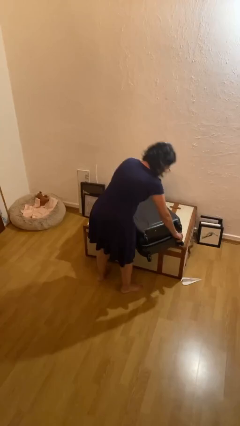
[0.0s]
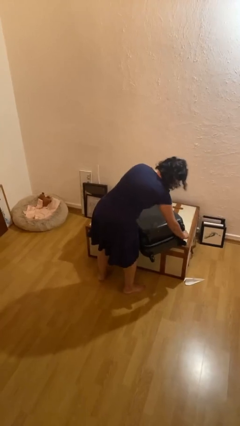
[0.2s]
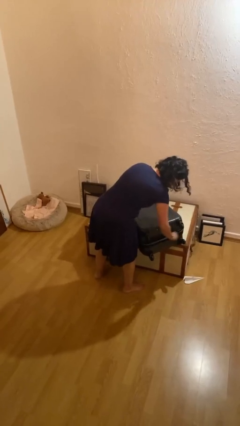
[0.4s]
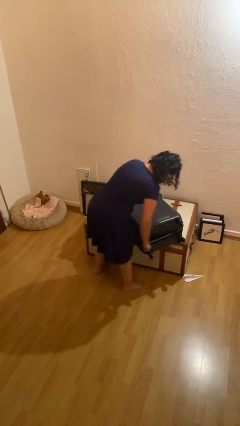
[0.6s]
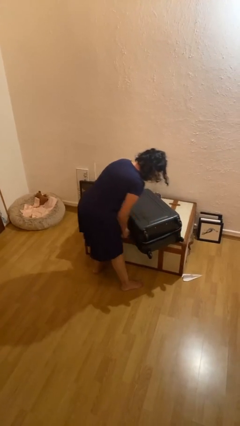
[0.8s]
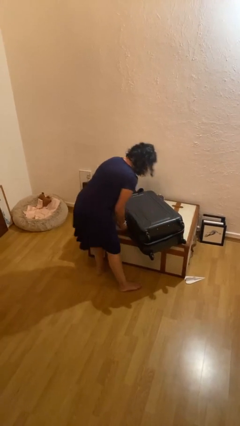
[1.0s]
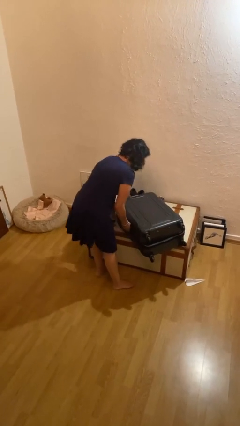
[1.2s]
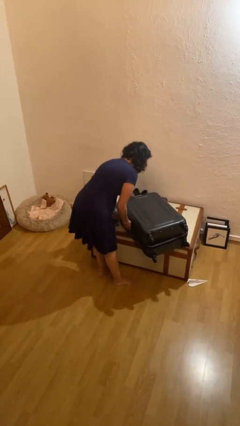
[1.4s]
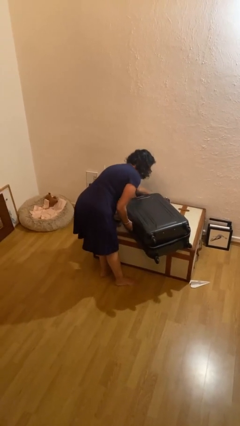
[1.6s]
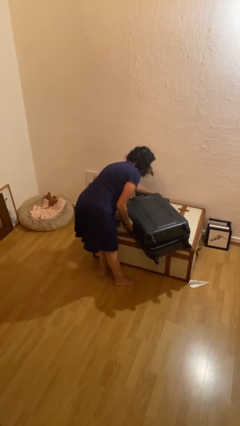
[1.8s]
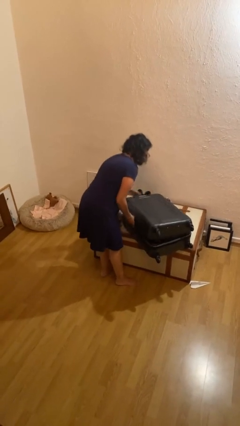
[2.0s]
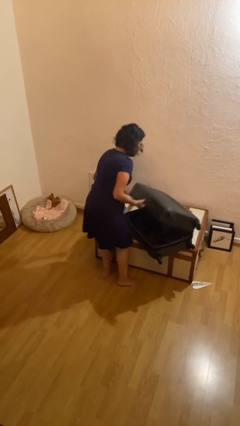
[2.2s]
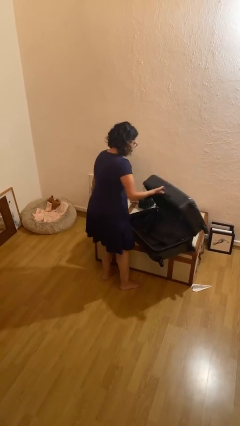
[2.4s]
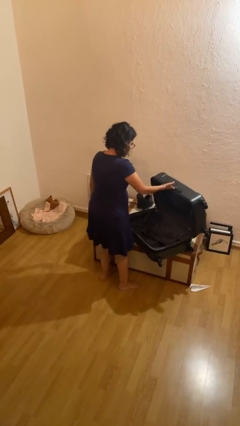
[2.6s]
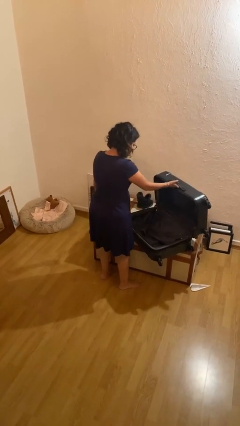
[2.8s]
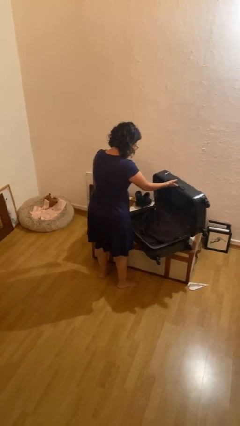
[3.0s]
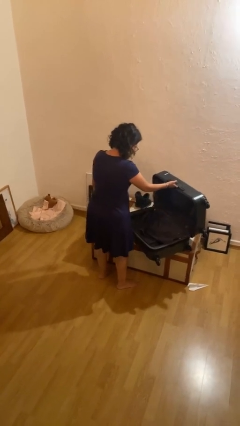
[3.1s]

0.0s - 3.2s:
person opens suitcase

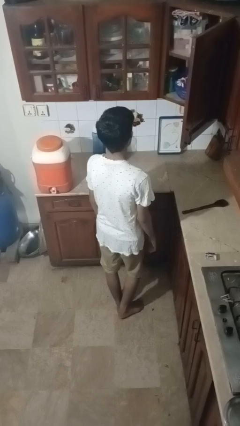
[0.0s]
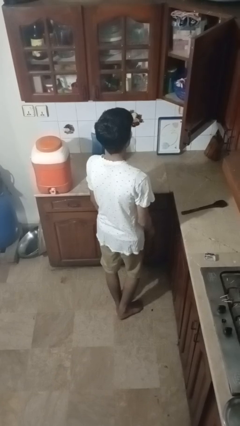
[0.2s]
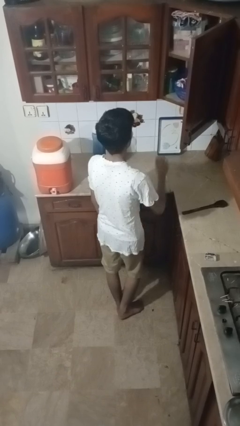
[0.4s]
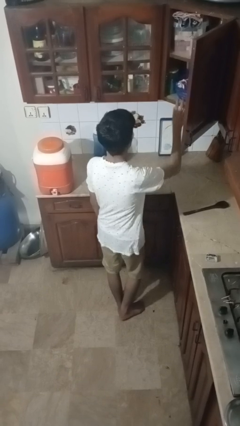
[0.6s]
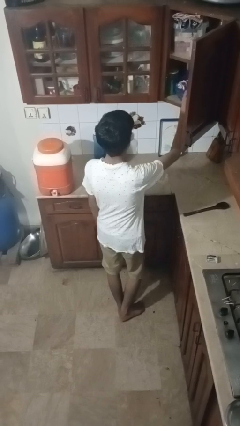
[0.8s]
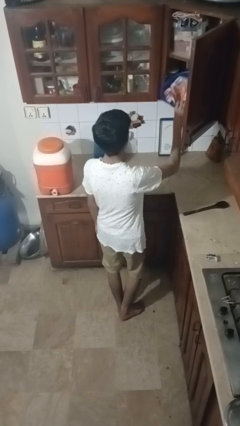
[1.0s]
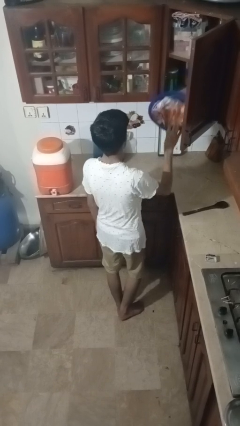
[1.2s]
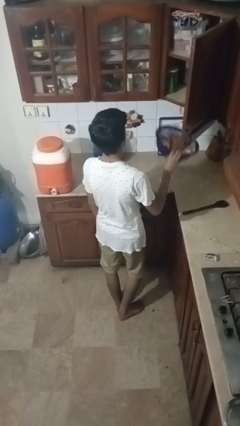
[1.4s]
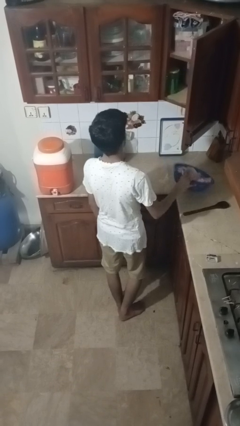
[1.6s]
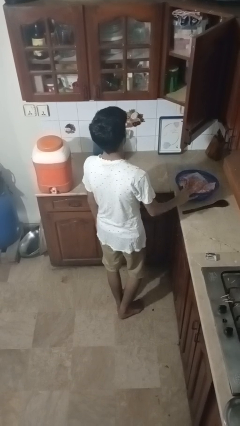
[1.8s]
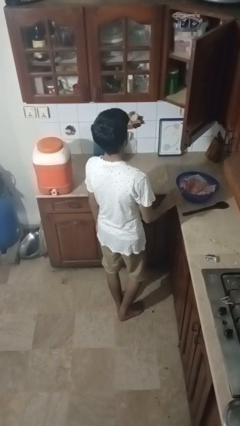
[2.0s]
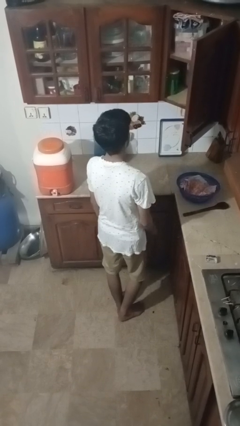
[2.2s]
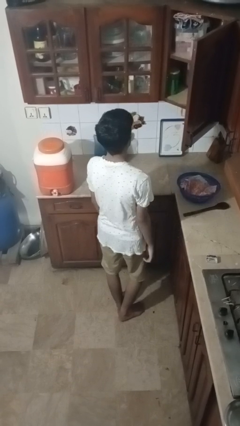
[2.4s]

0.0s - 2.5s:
person takes object from cabinet

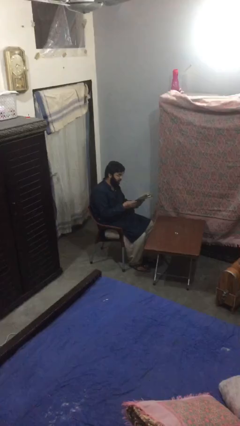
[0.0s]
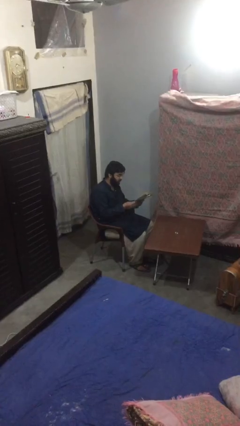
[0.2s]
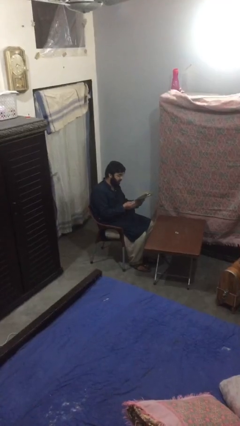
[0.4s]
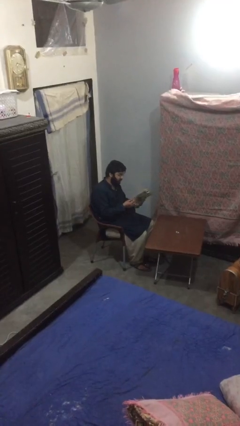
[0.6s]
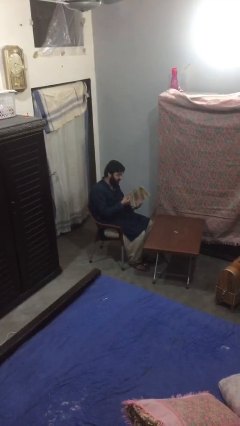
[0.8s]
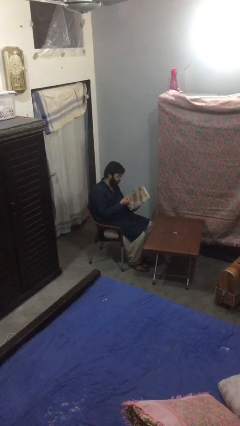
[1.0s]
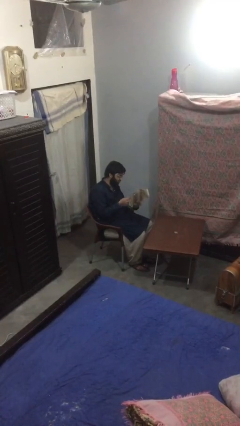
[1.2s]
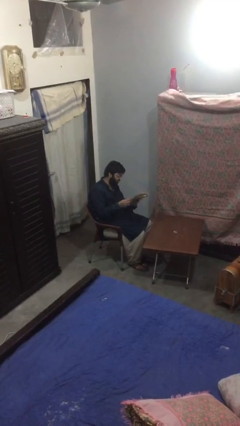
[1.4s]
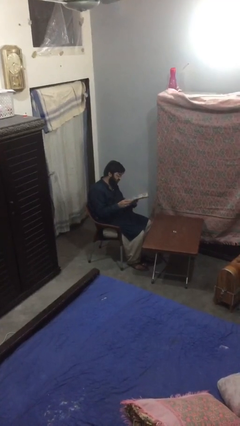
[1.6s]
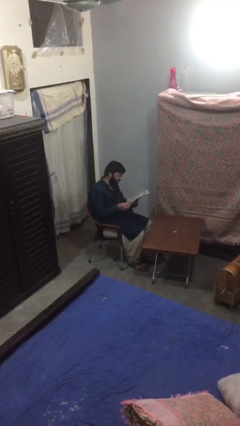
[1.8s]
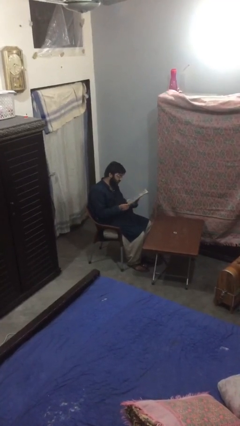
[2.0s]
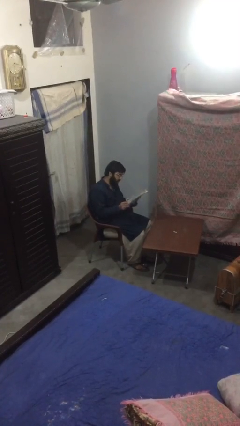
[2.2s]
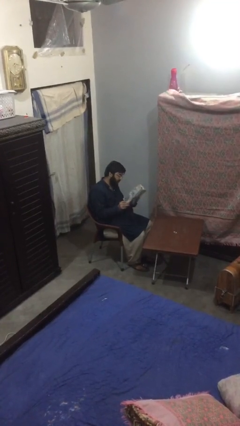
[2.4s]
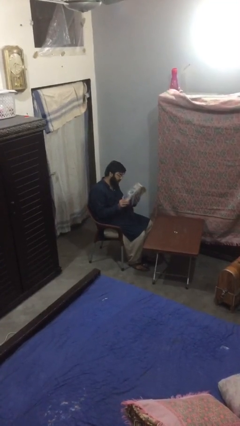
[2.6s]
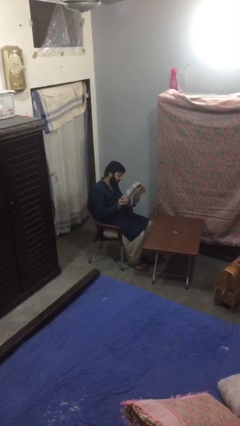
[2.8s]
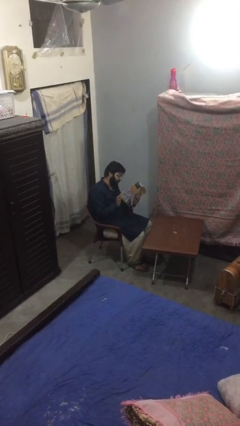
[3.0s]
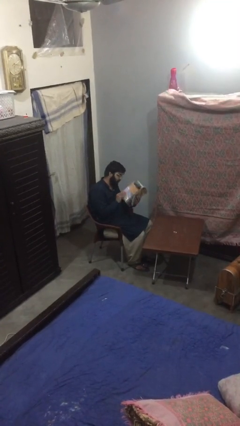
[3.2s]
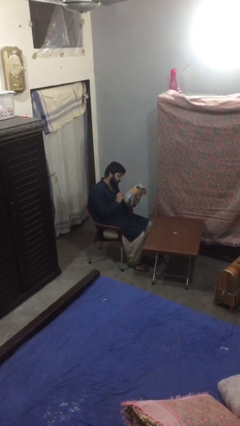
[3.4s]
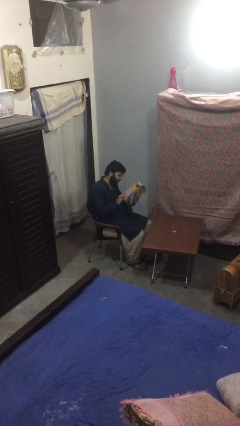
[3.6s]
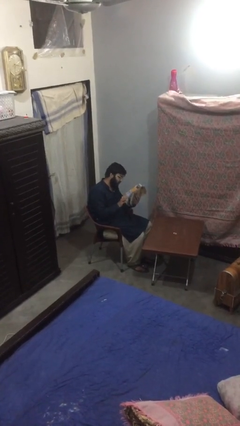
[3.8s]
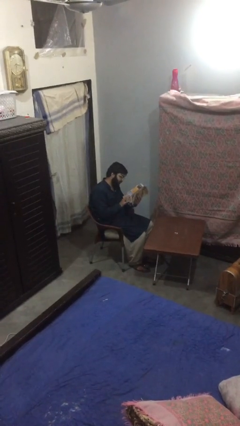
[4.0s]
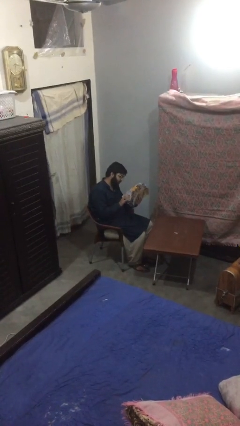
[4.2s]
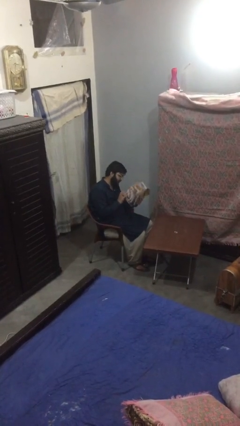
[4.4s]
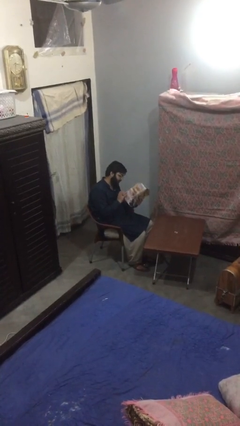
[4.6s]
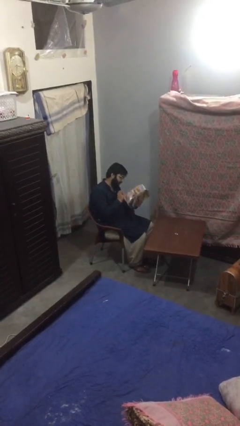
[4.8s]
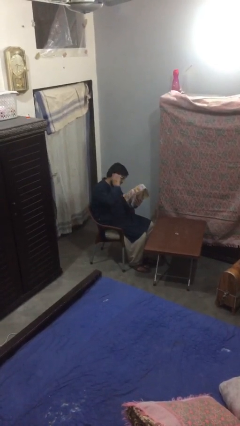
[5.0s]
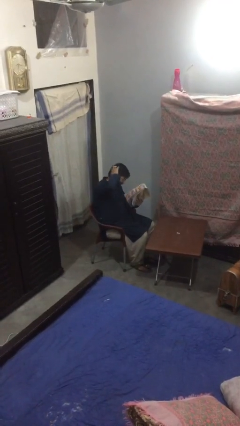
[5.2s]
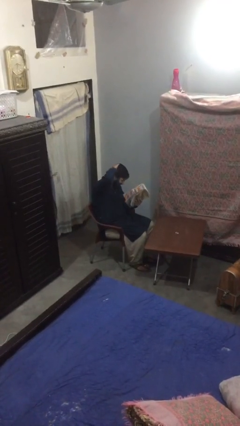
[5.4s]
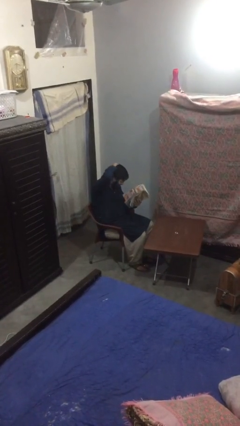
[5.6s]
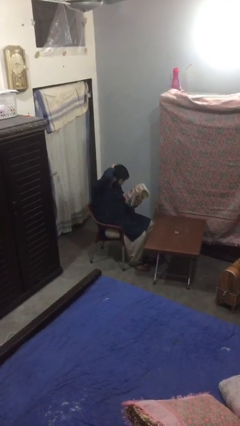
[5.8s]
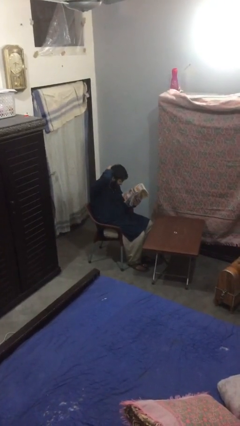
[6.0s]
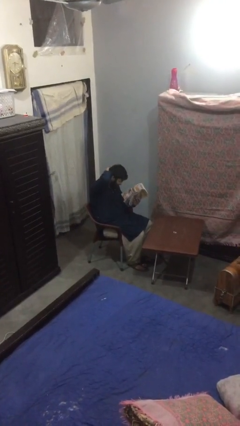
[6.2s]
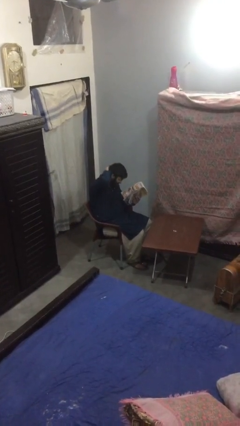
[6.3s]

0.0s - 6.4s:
person reads document

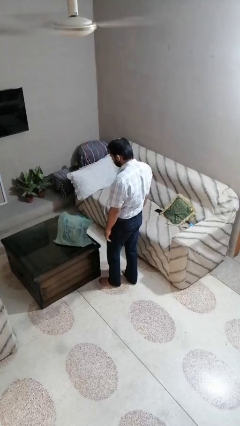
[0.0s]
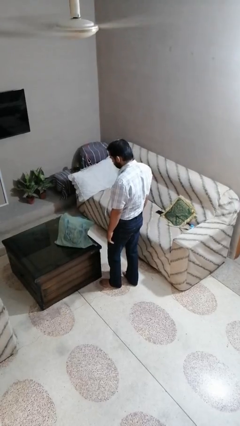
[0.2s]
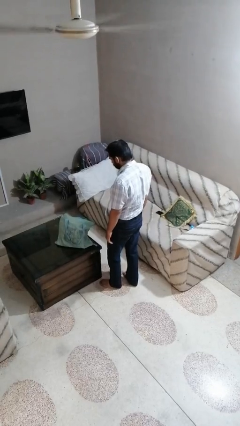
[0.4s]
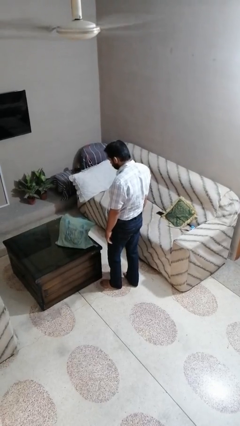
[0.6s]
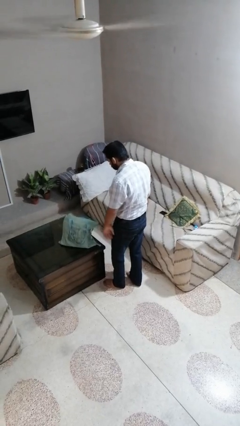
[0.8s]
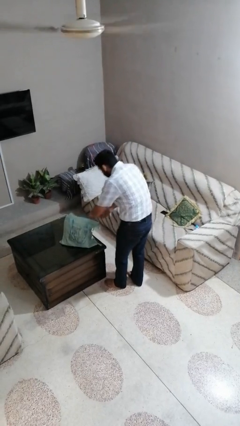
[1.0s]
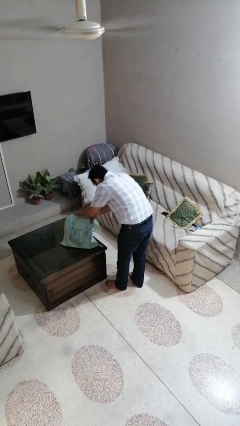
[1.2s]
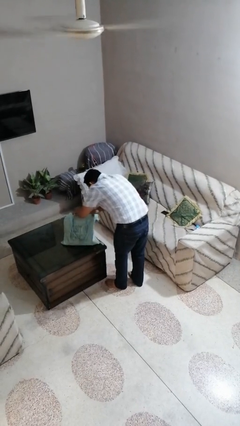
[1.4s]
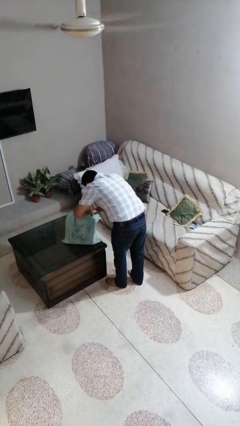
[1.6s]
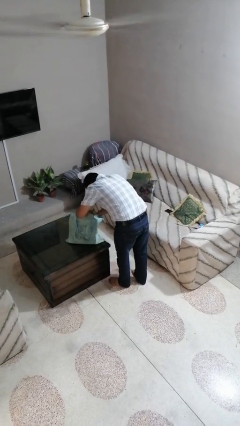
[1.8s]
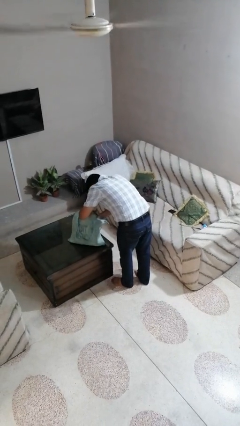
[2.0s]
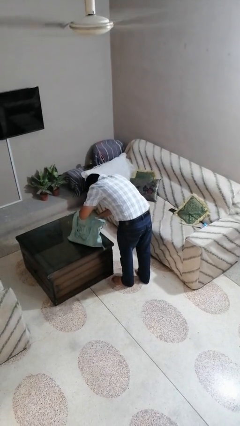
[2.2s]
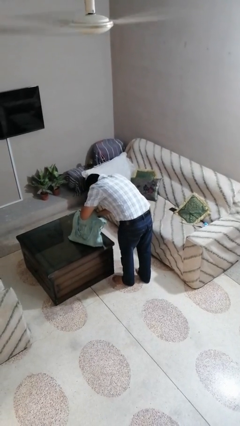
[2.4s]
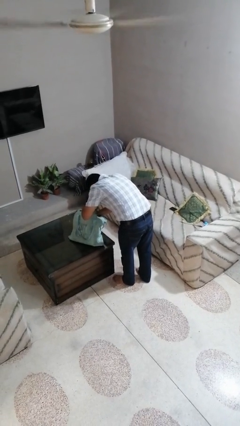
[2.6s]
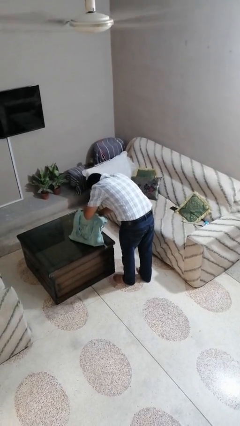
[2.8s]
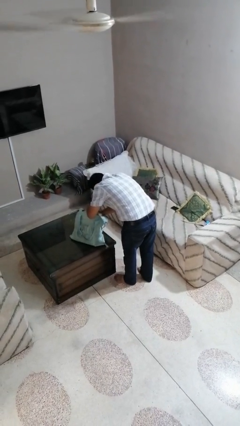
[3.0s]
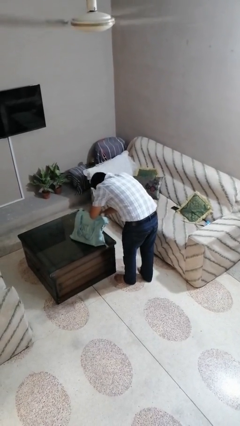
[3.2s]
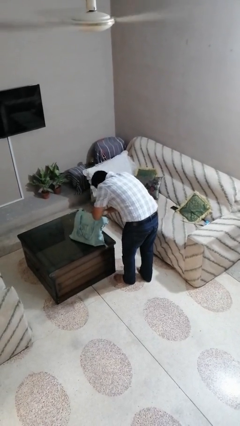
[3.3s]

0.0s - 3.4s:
person searches in bag

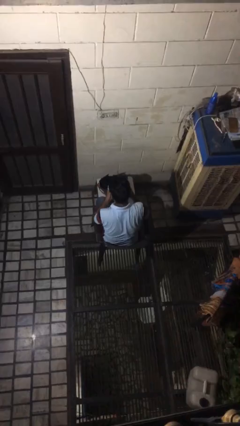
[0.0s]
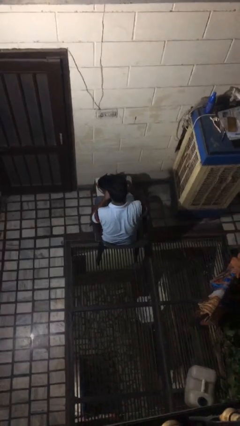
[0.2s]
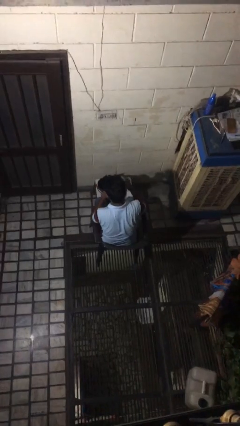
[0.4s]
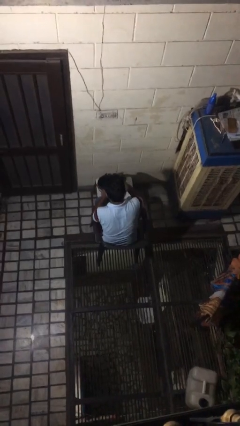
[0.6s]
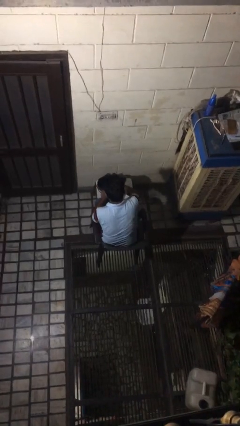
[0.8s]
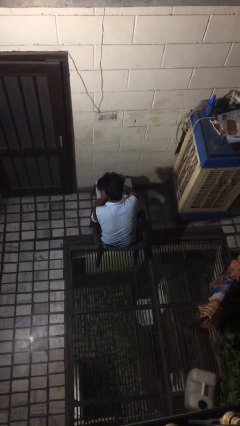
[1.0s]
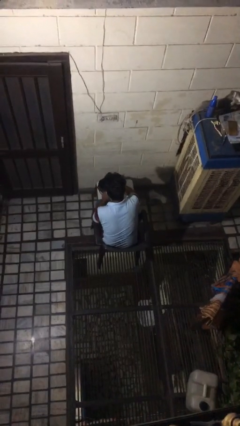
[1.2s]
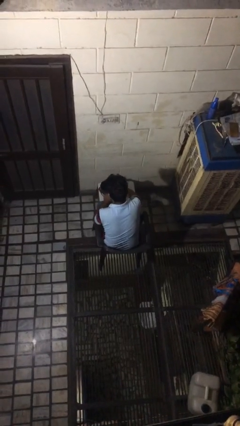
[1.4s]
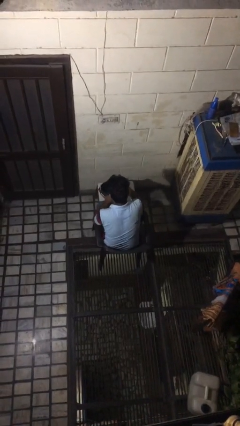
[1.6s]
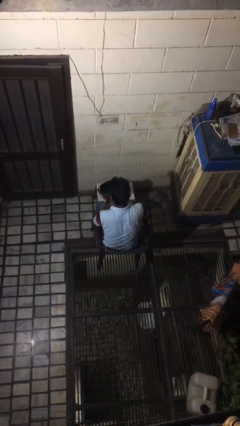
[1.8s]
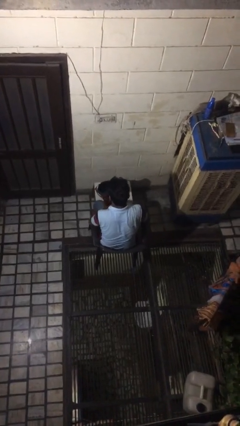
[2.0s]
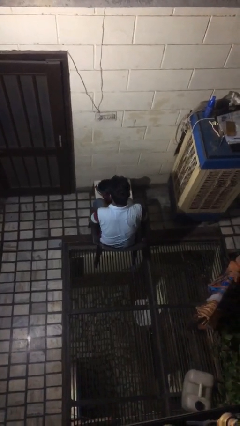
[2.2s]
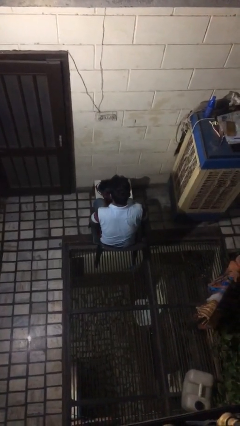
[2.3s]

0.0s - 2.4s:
person puts object into bag

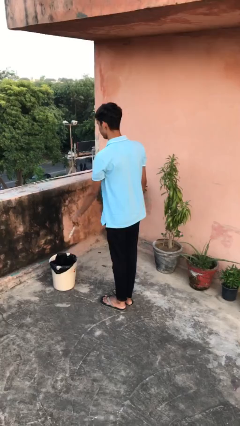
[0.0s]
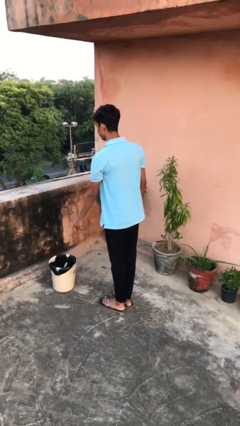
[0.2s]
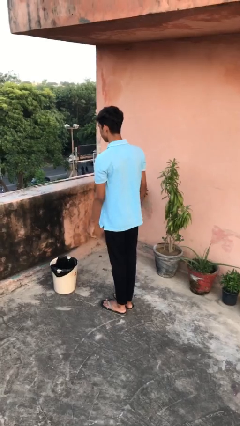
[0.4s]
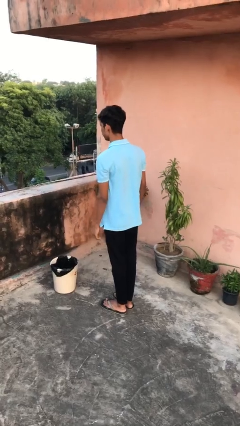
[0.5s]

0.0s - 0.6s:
person discards trash
